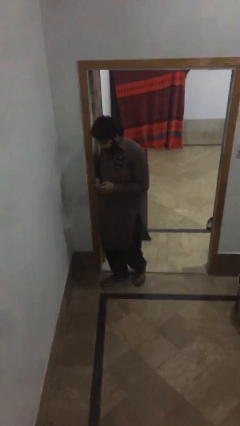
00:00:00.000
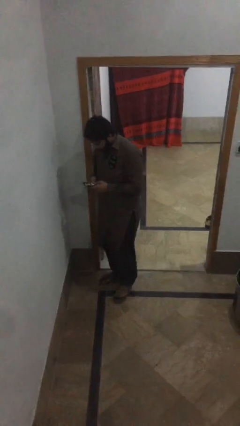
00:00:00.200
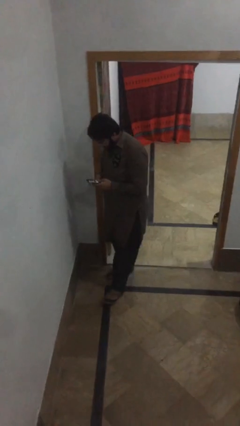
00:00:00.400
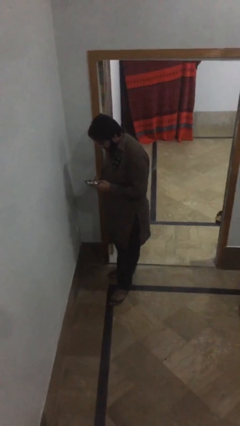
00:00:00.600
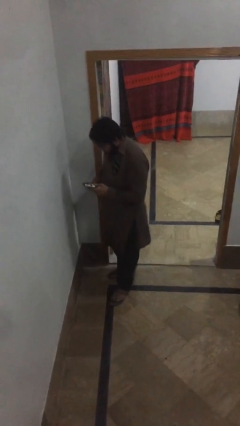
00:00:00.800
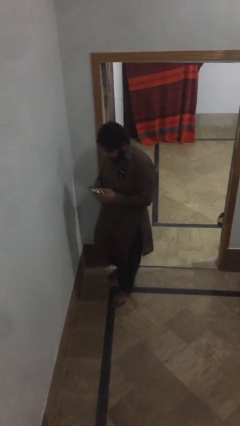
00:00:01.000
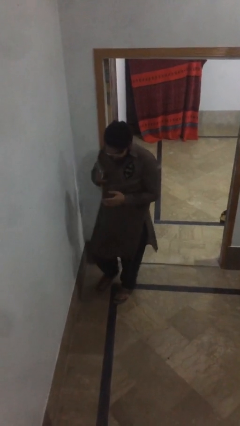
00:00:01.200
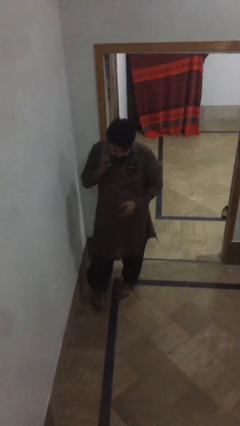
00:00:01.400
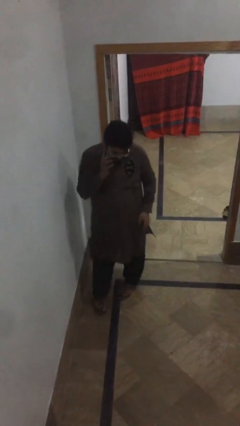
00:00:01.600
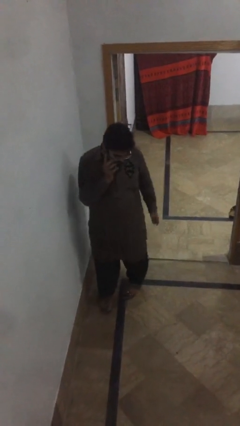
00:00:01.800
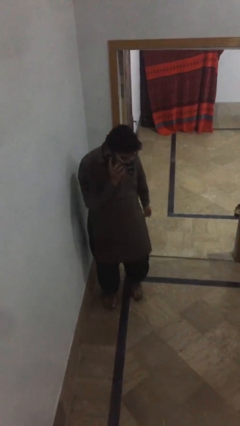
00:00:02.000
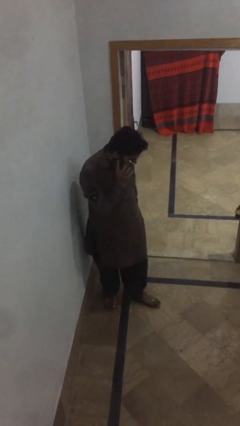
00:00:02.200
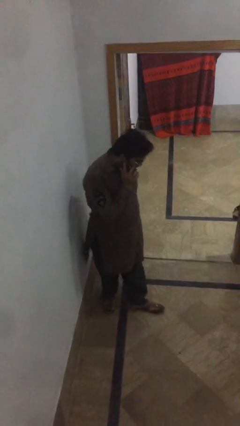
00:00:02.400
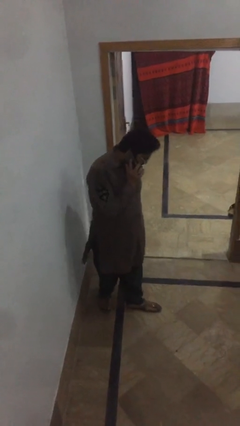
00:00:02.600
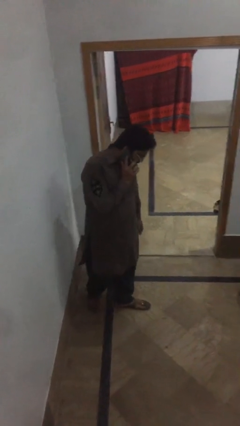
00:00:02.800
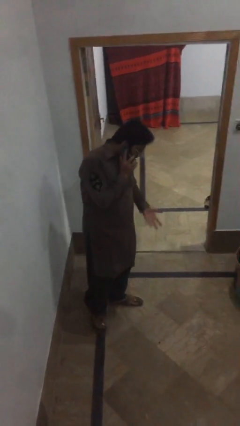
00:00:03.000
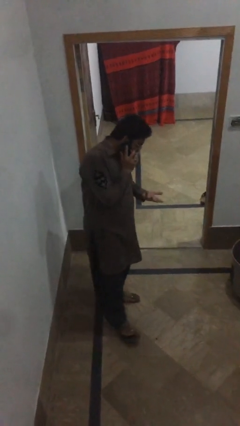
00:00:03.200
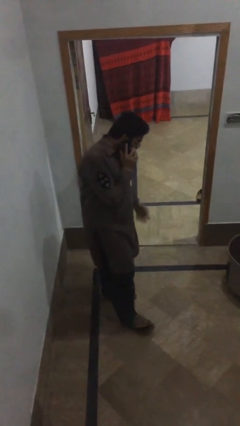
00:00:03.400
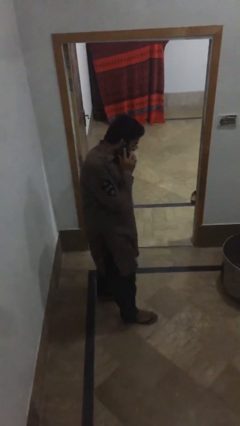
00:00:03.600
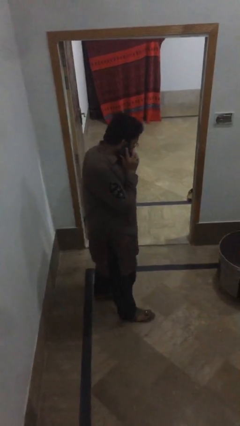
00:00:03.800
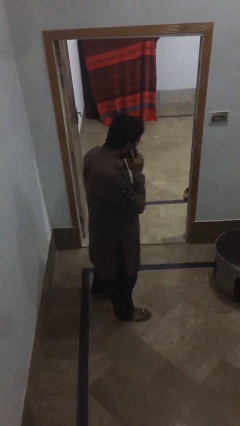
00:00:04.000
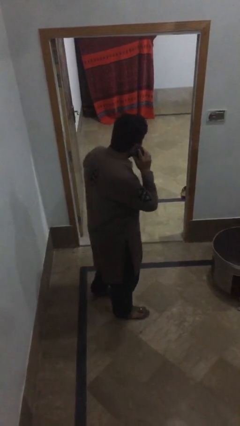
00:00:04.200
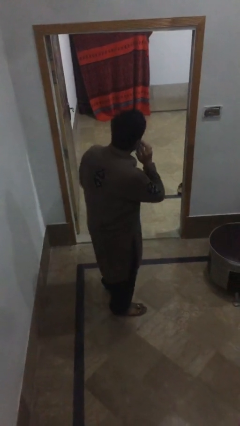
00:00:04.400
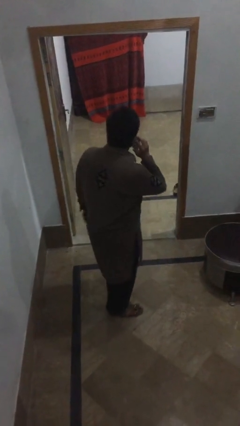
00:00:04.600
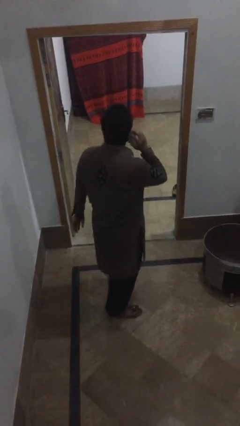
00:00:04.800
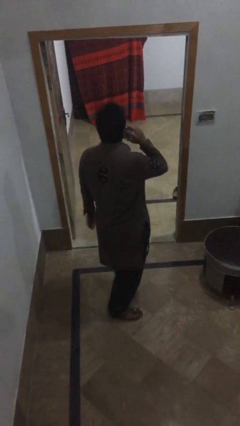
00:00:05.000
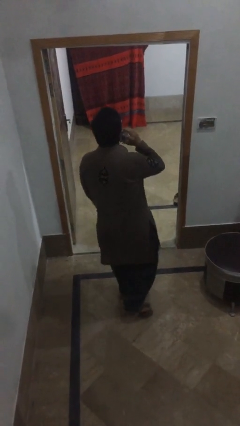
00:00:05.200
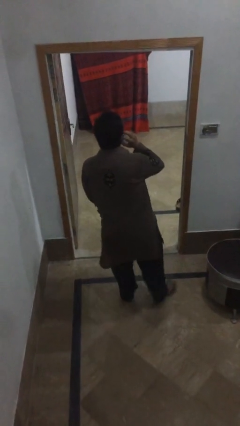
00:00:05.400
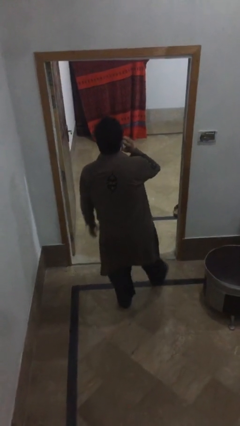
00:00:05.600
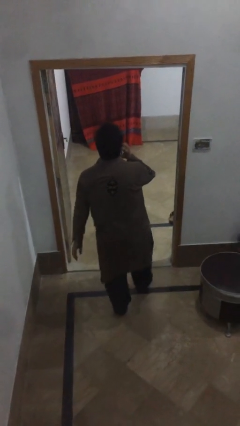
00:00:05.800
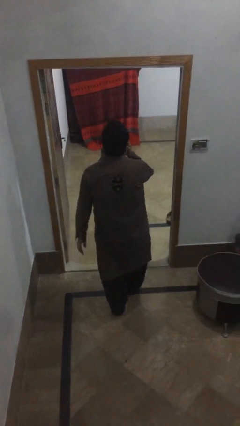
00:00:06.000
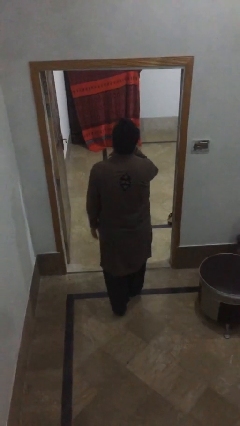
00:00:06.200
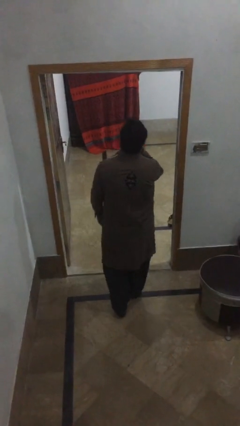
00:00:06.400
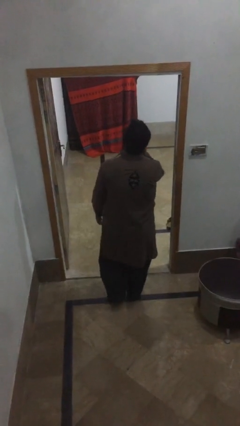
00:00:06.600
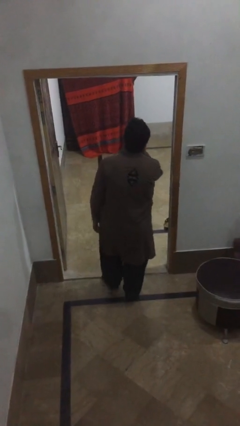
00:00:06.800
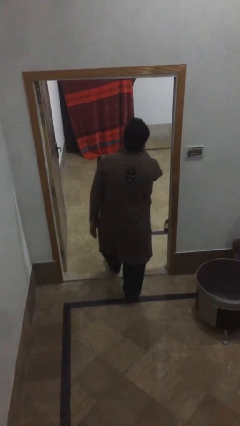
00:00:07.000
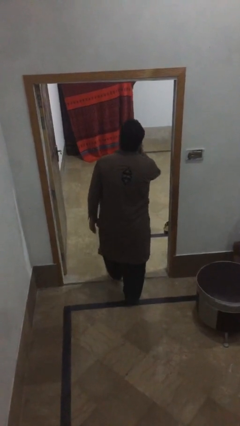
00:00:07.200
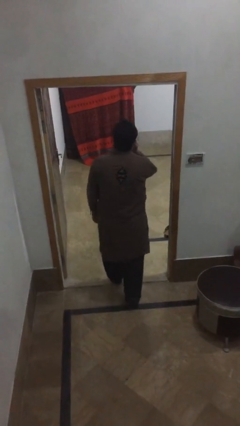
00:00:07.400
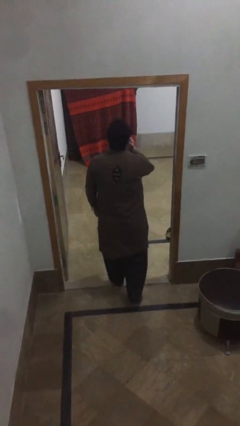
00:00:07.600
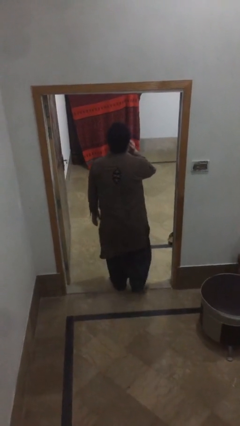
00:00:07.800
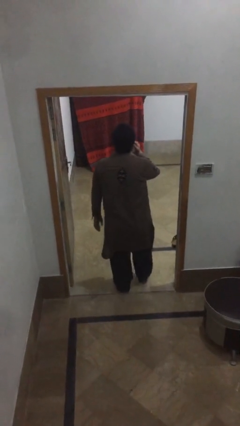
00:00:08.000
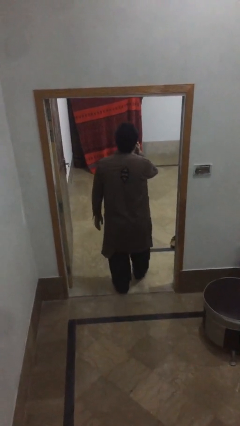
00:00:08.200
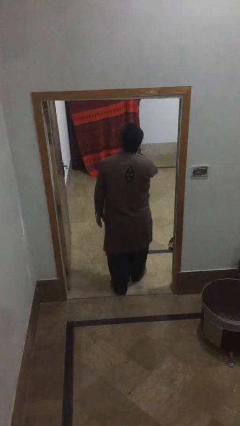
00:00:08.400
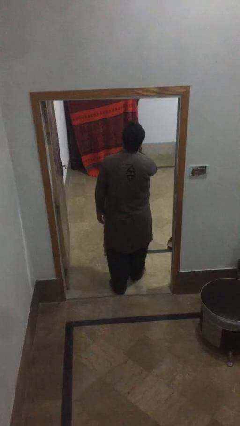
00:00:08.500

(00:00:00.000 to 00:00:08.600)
person talks on phone

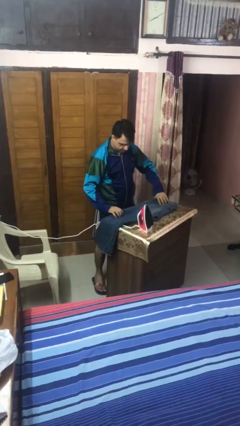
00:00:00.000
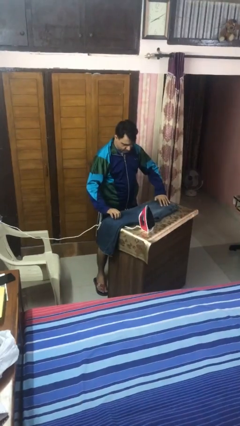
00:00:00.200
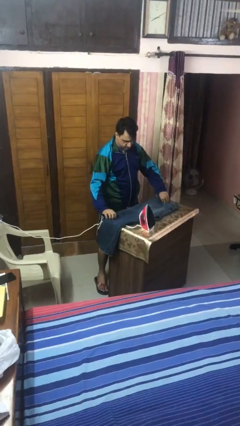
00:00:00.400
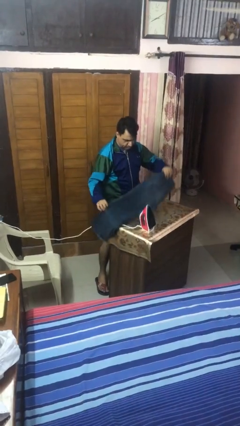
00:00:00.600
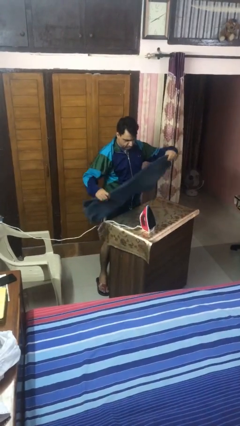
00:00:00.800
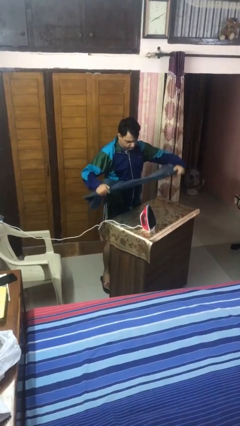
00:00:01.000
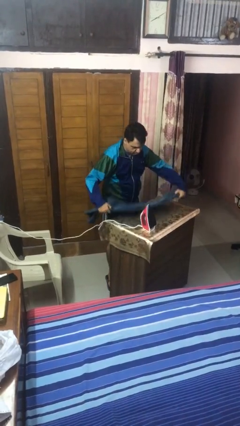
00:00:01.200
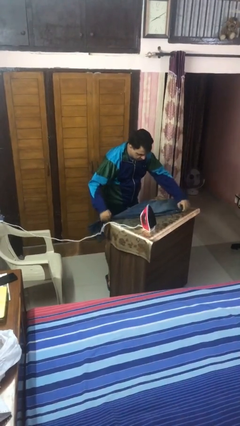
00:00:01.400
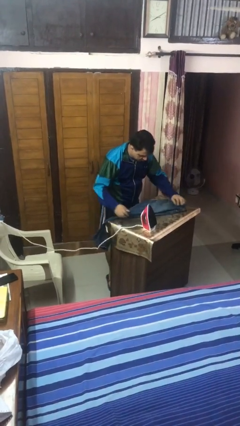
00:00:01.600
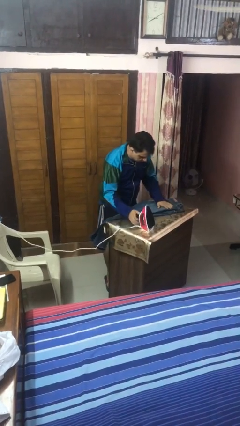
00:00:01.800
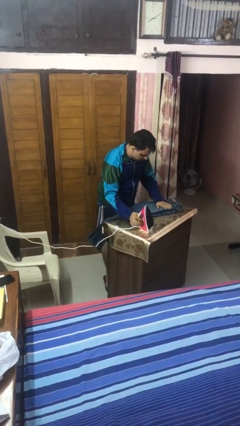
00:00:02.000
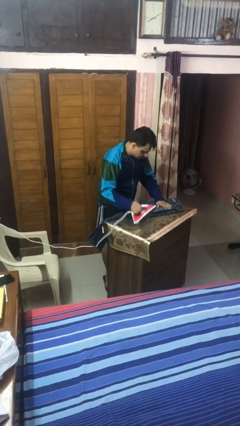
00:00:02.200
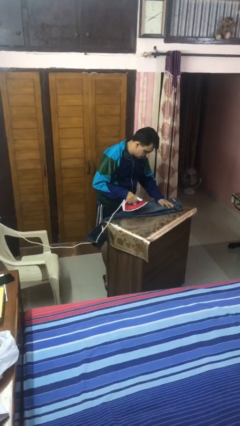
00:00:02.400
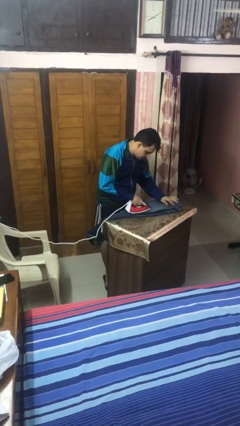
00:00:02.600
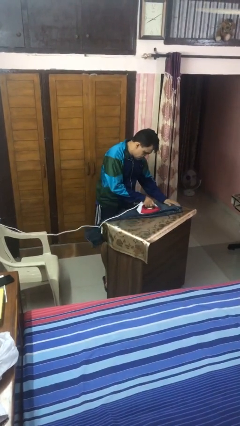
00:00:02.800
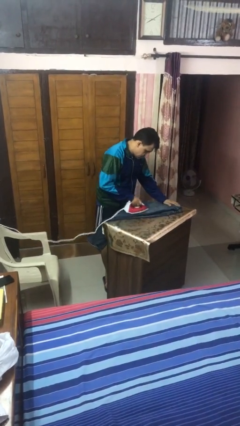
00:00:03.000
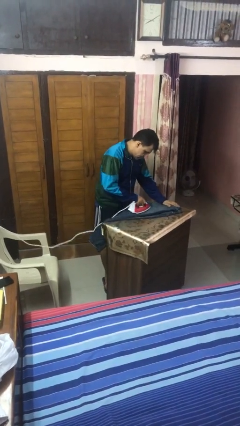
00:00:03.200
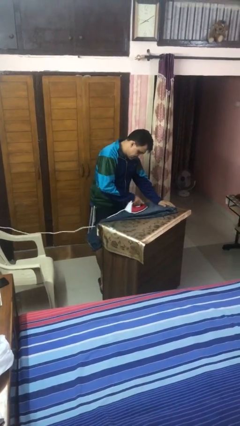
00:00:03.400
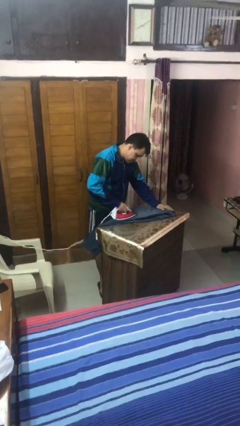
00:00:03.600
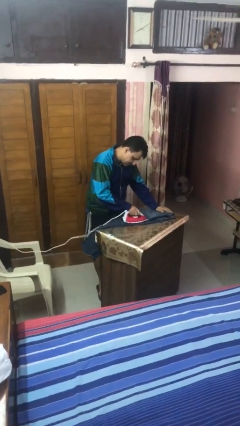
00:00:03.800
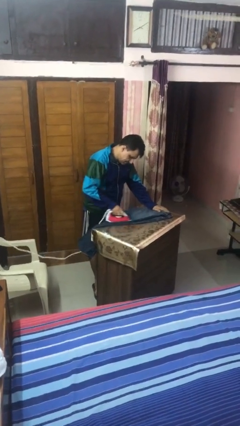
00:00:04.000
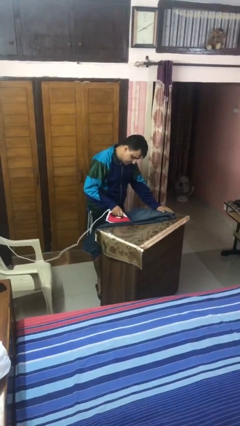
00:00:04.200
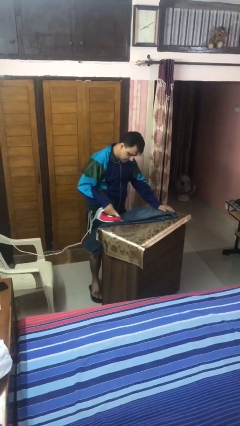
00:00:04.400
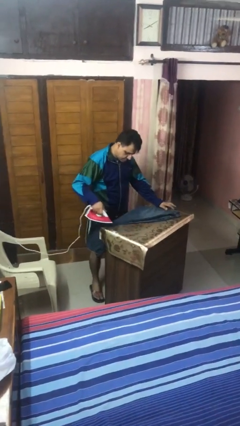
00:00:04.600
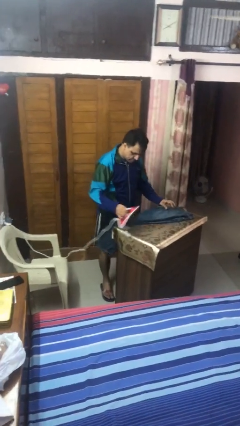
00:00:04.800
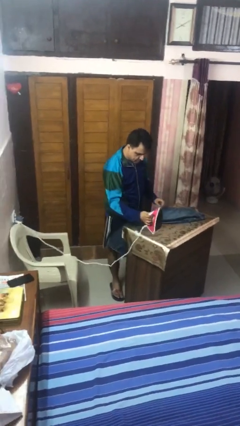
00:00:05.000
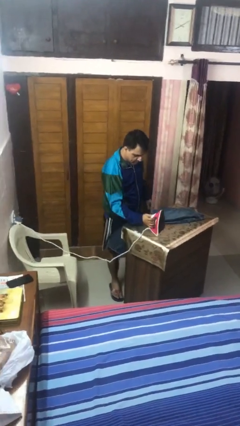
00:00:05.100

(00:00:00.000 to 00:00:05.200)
person irons clothes

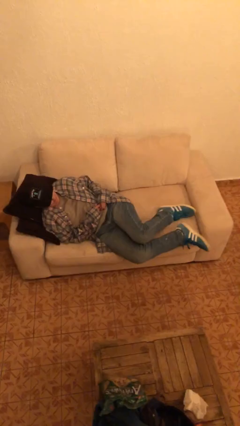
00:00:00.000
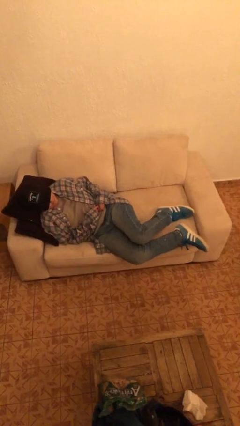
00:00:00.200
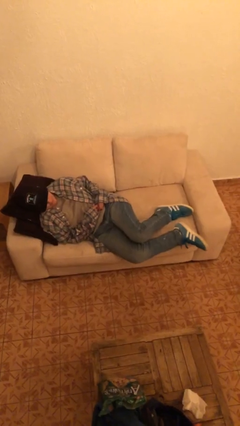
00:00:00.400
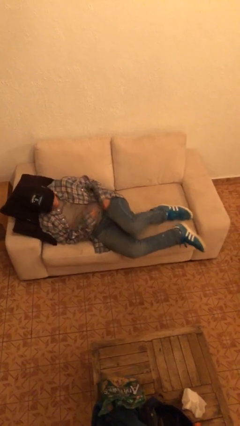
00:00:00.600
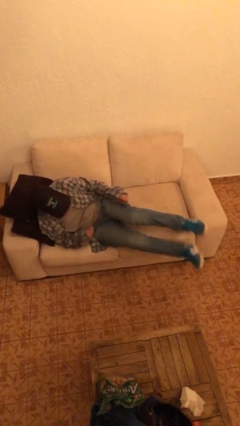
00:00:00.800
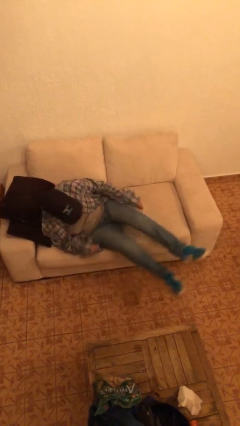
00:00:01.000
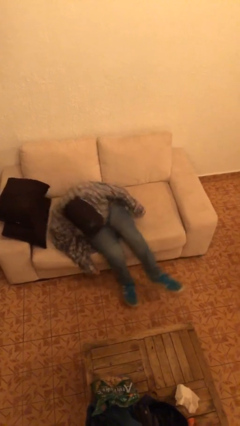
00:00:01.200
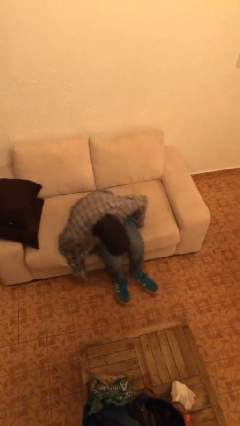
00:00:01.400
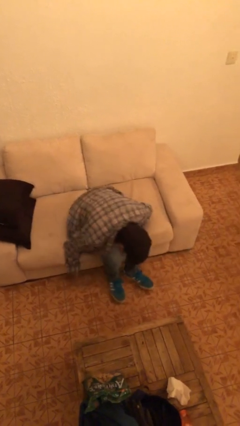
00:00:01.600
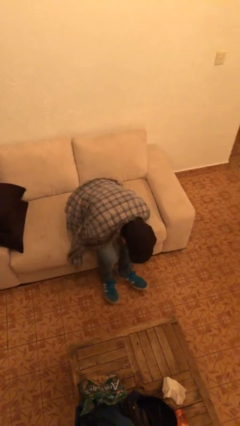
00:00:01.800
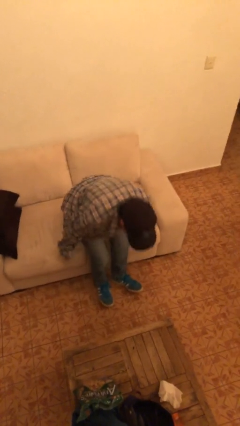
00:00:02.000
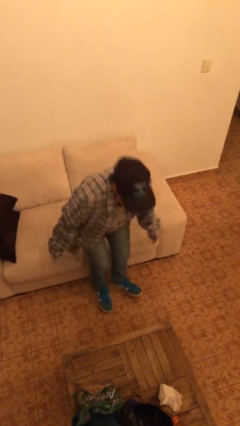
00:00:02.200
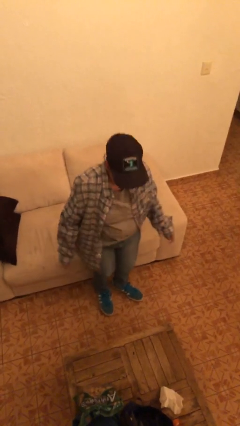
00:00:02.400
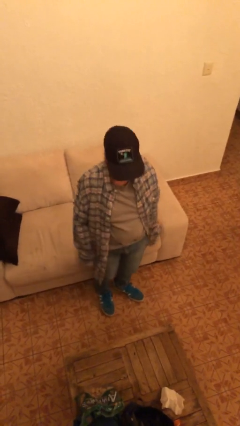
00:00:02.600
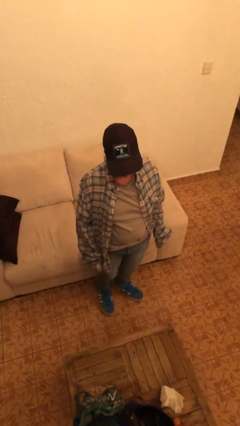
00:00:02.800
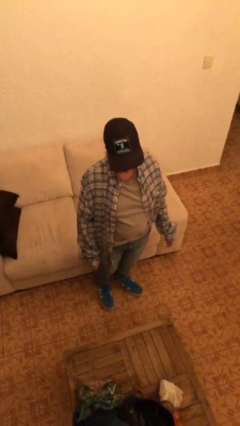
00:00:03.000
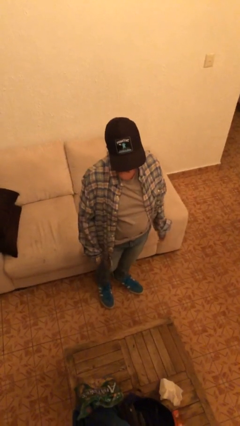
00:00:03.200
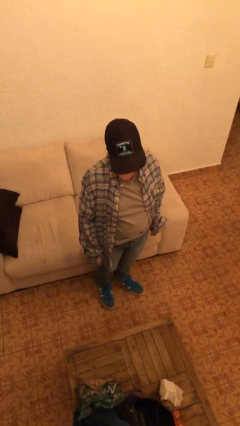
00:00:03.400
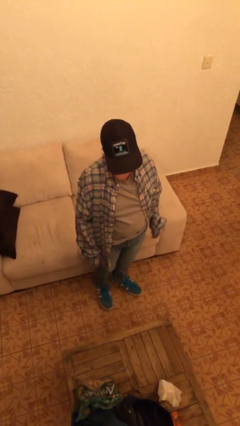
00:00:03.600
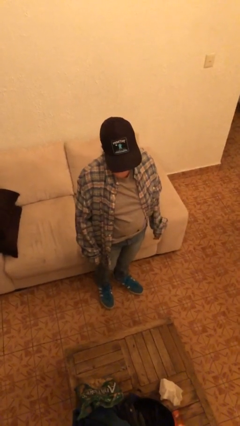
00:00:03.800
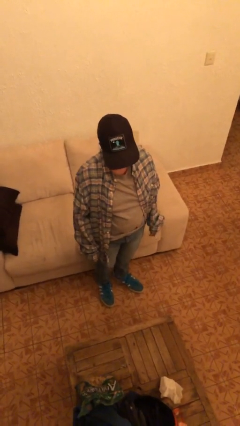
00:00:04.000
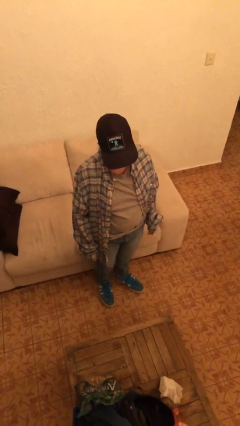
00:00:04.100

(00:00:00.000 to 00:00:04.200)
person stands up
